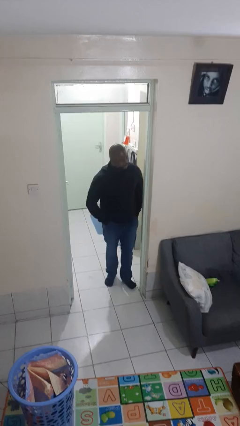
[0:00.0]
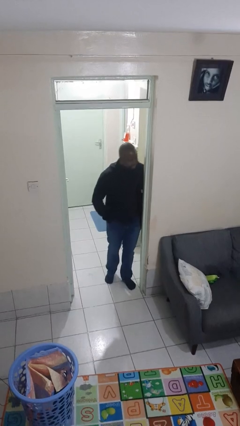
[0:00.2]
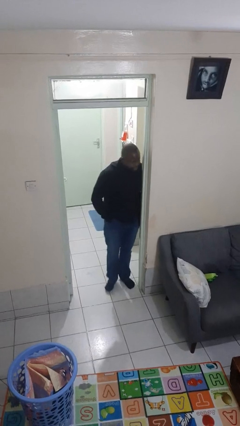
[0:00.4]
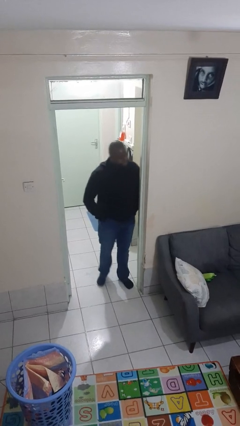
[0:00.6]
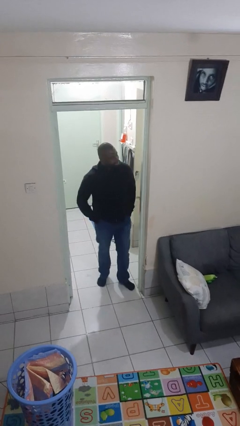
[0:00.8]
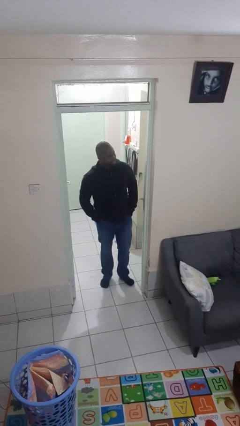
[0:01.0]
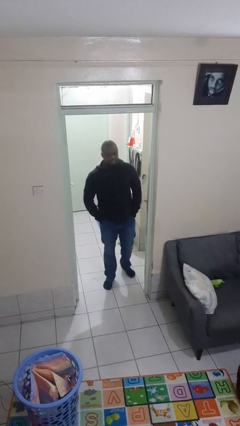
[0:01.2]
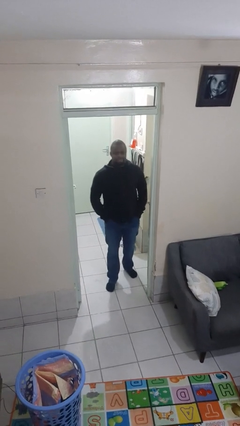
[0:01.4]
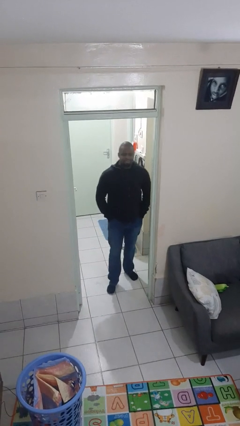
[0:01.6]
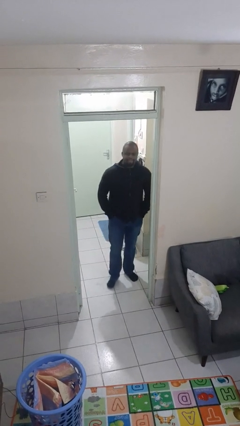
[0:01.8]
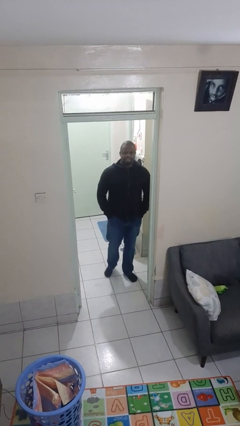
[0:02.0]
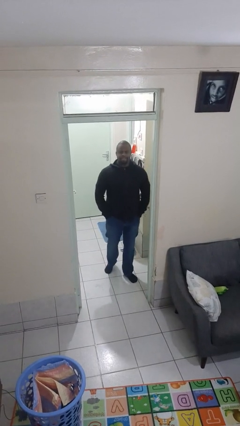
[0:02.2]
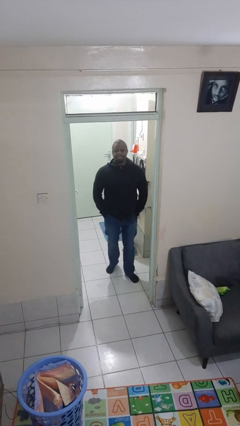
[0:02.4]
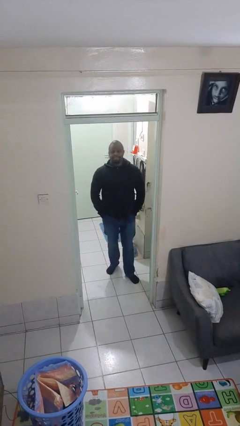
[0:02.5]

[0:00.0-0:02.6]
person bumps into wall

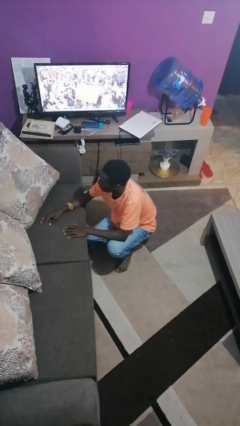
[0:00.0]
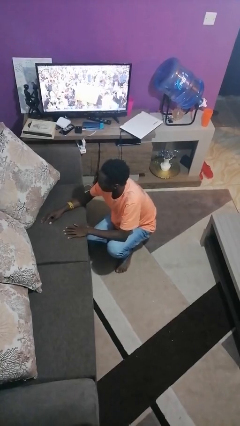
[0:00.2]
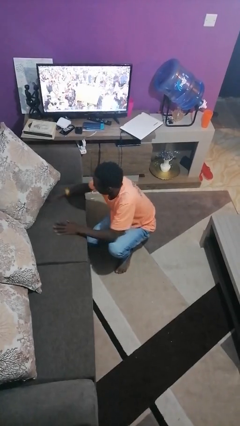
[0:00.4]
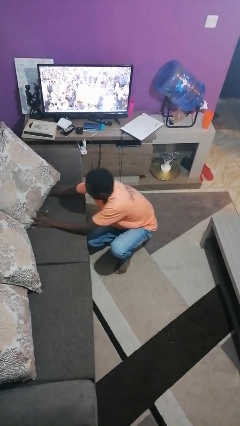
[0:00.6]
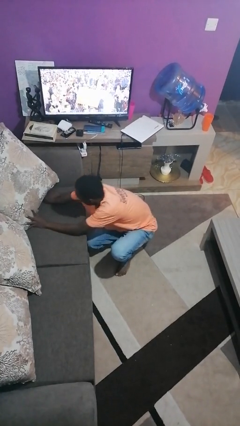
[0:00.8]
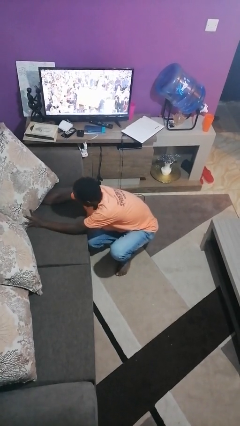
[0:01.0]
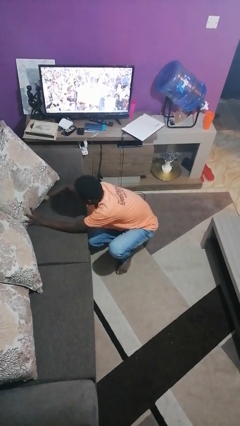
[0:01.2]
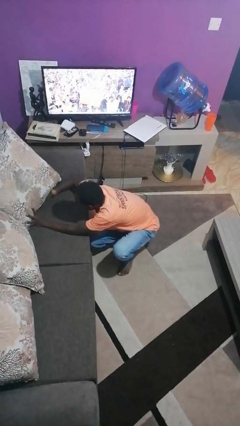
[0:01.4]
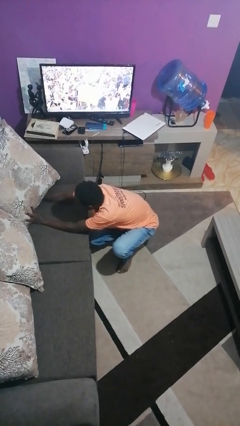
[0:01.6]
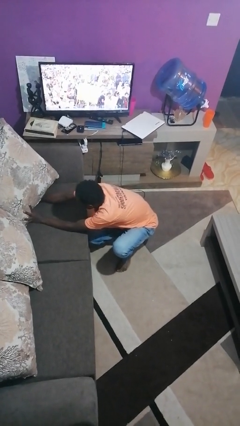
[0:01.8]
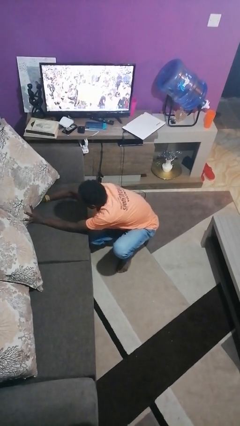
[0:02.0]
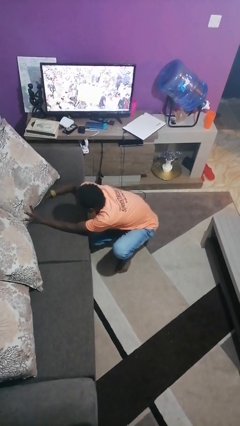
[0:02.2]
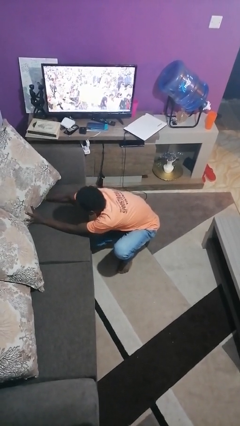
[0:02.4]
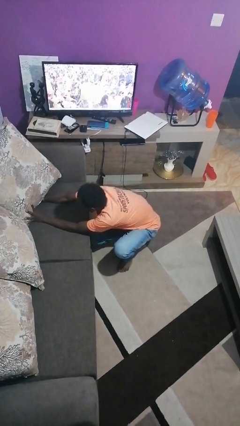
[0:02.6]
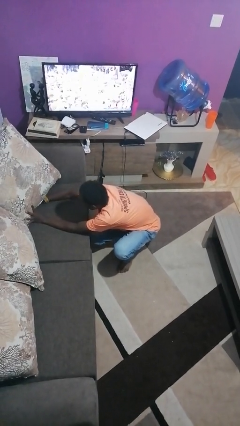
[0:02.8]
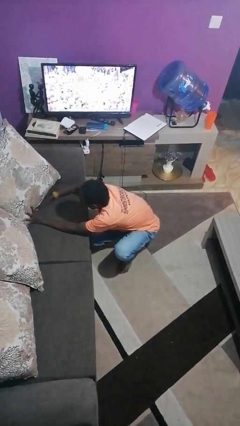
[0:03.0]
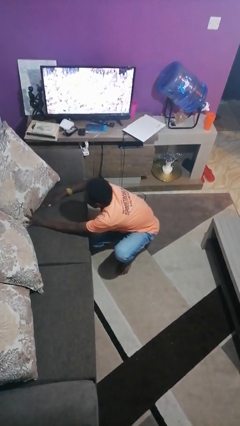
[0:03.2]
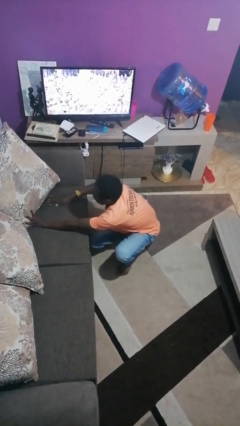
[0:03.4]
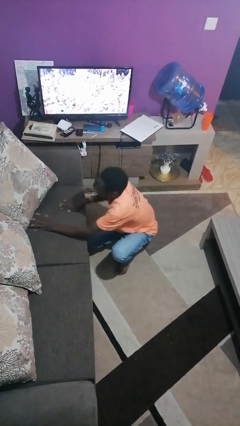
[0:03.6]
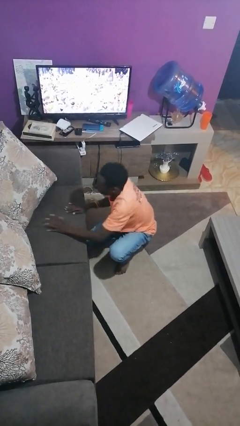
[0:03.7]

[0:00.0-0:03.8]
person searches in couch

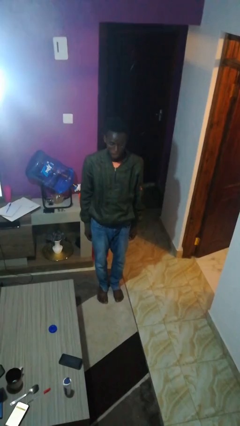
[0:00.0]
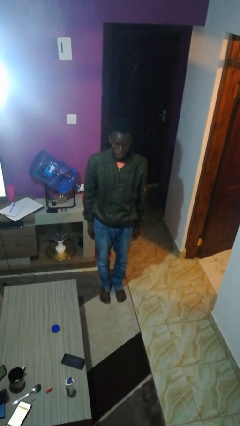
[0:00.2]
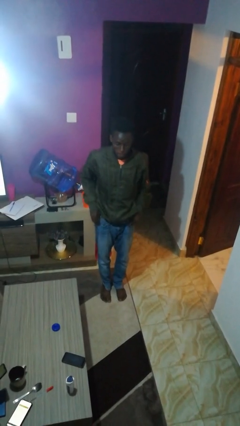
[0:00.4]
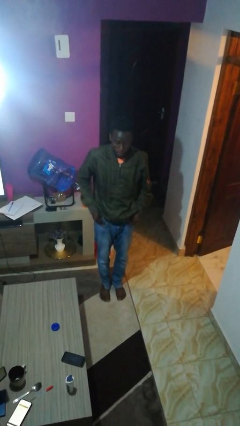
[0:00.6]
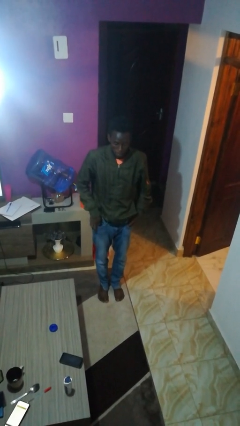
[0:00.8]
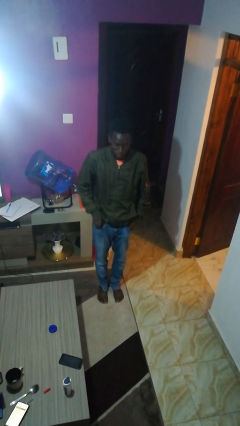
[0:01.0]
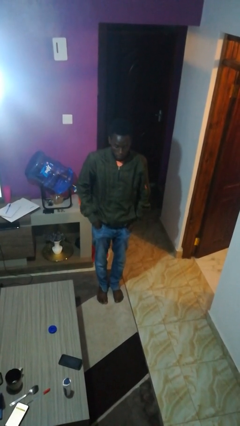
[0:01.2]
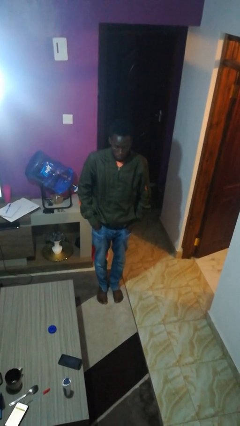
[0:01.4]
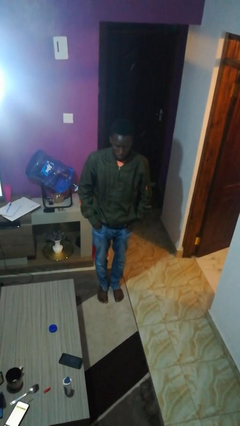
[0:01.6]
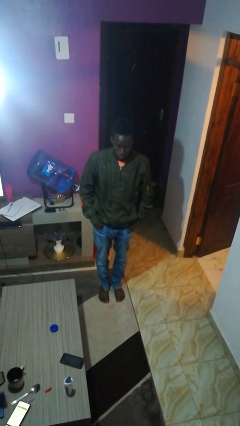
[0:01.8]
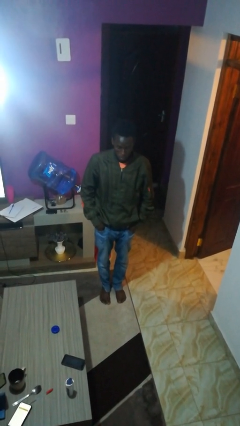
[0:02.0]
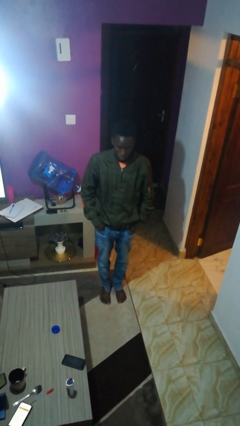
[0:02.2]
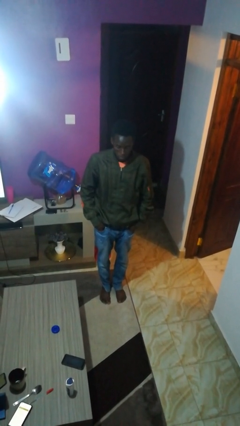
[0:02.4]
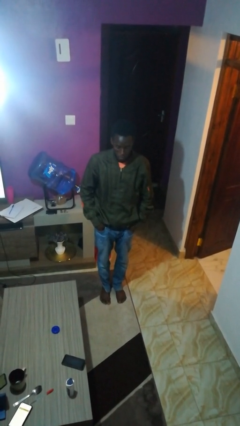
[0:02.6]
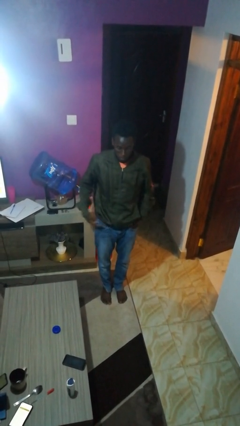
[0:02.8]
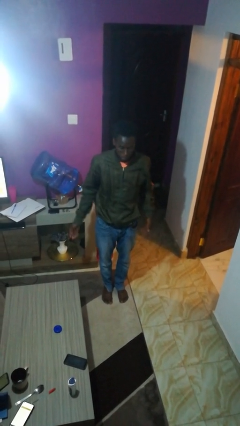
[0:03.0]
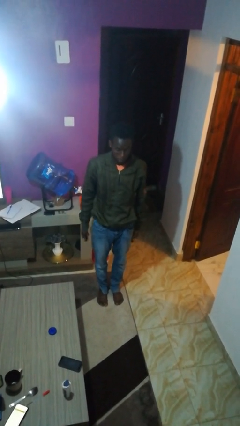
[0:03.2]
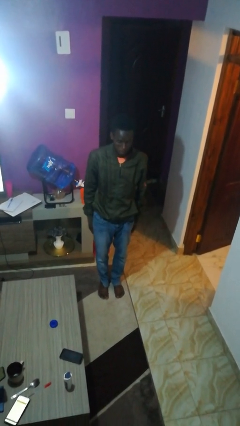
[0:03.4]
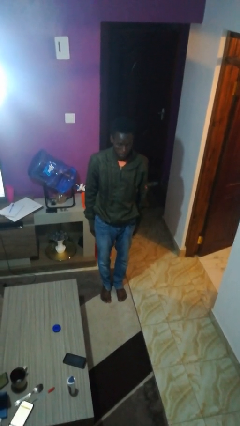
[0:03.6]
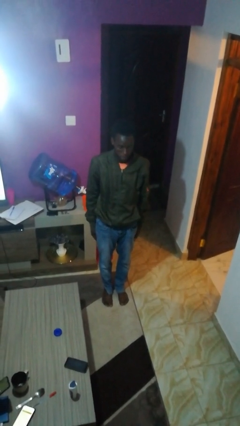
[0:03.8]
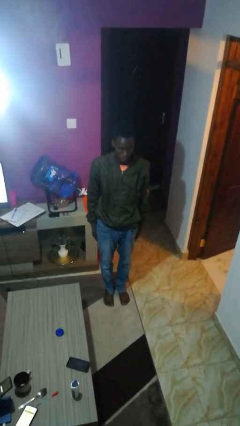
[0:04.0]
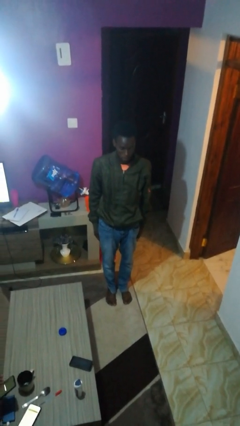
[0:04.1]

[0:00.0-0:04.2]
person puts hands in back pockets

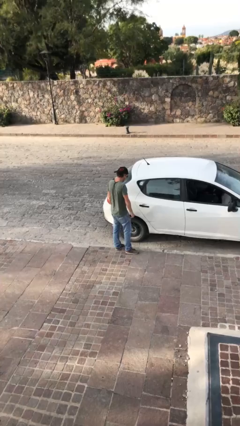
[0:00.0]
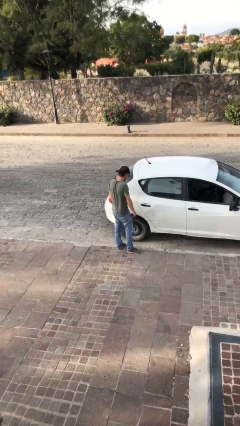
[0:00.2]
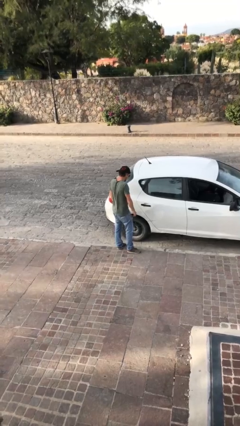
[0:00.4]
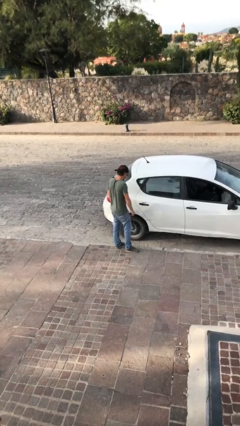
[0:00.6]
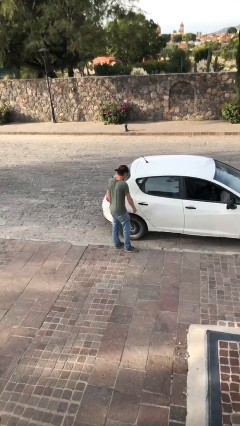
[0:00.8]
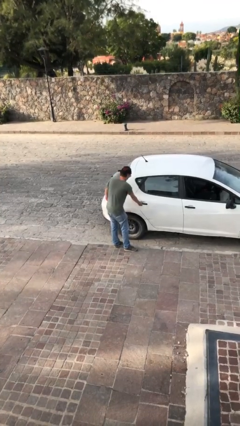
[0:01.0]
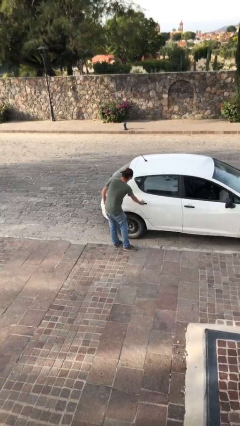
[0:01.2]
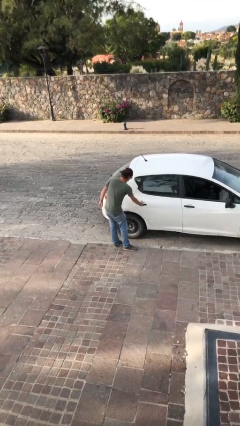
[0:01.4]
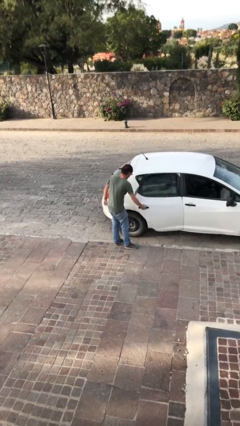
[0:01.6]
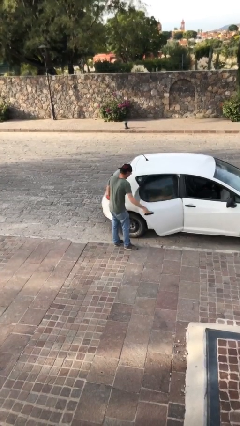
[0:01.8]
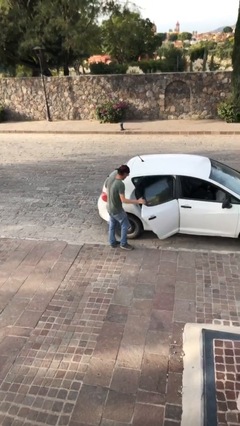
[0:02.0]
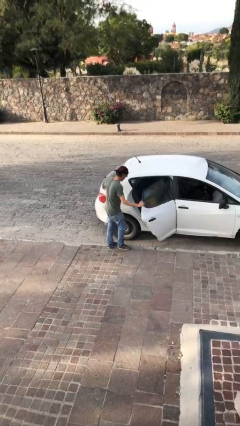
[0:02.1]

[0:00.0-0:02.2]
person opens car door

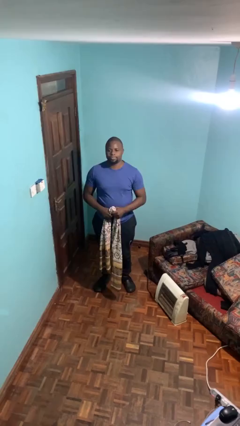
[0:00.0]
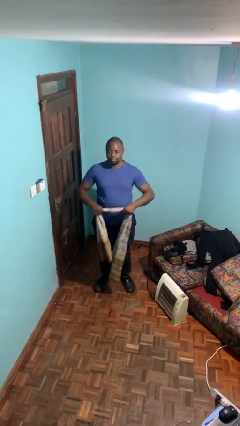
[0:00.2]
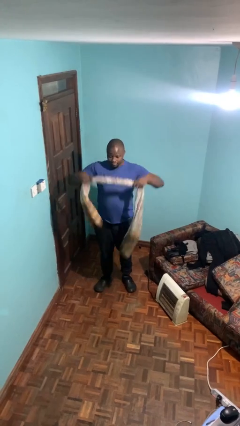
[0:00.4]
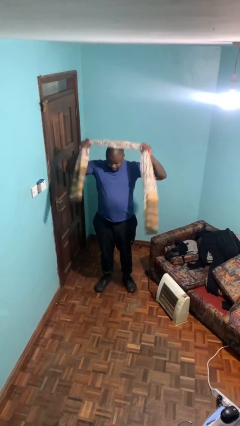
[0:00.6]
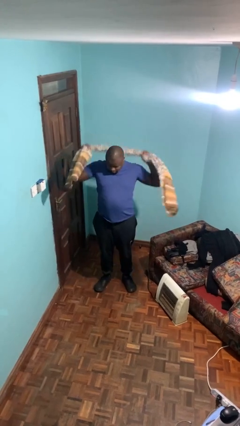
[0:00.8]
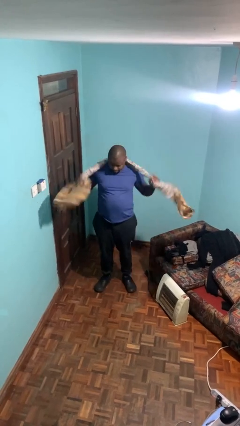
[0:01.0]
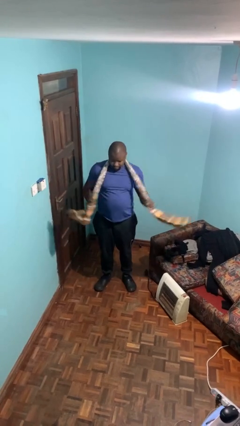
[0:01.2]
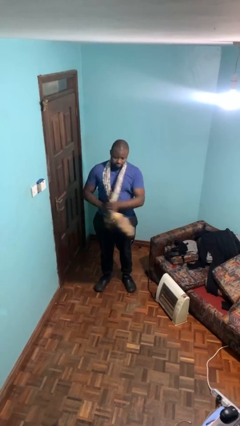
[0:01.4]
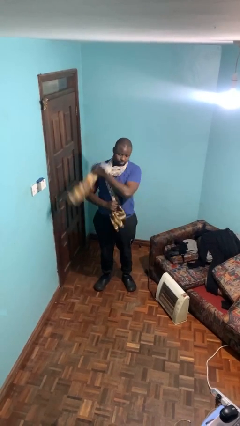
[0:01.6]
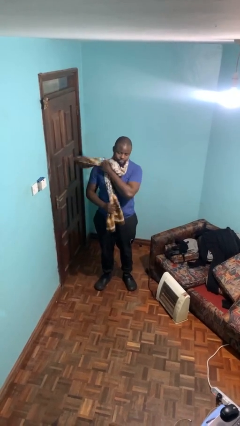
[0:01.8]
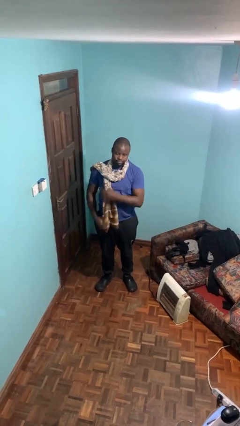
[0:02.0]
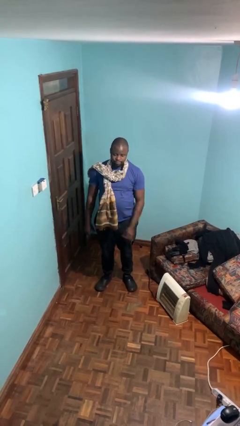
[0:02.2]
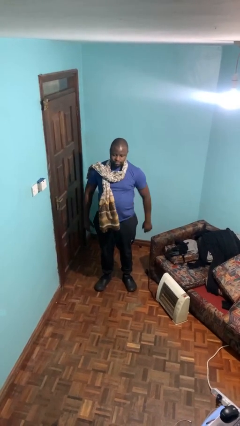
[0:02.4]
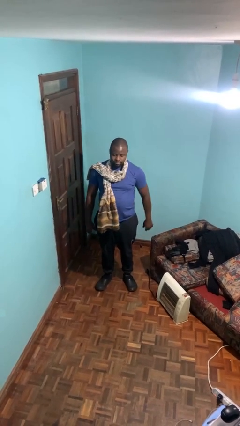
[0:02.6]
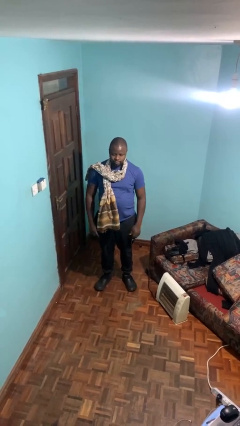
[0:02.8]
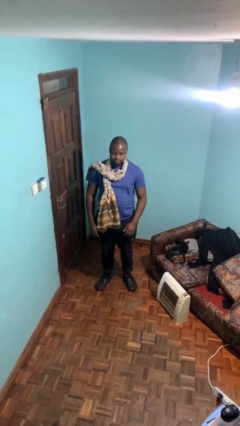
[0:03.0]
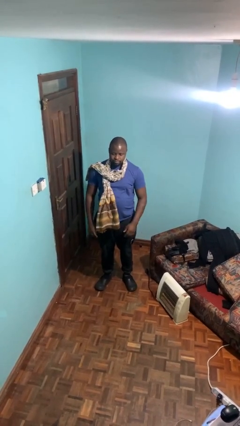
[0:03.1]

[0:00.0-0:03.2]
person puts on scarf

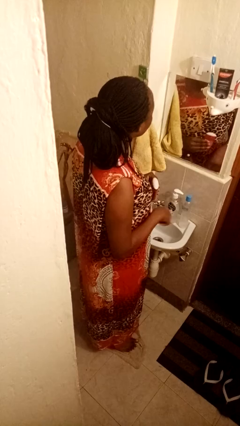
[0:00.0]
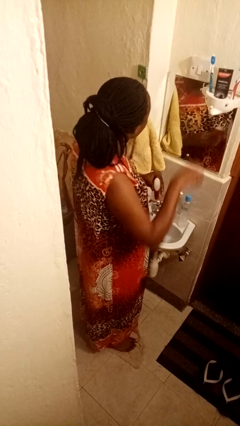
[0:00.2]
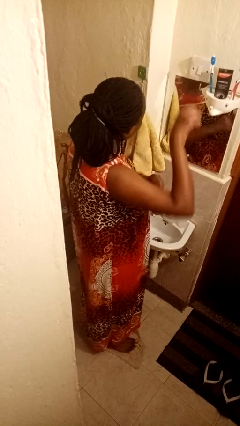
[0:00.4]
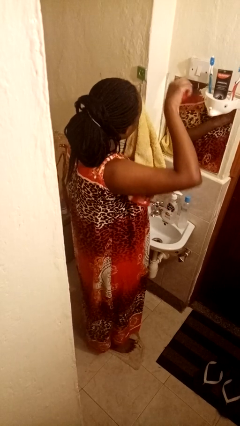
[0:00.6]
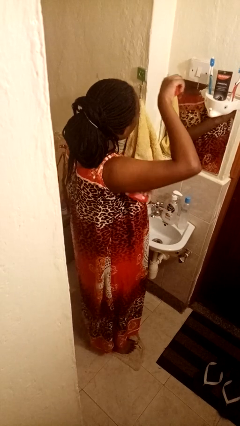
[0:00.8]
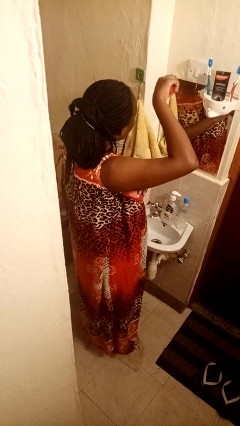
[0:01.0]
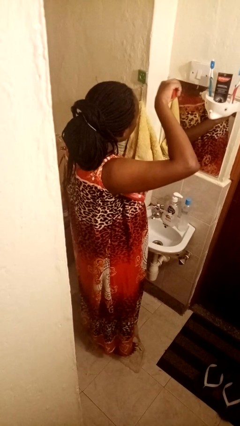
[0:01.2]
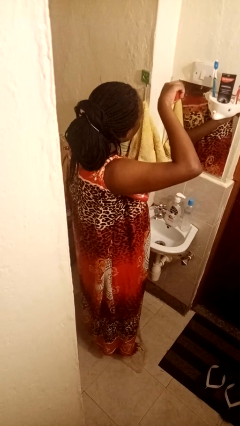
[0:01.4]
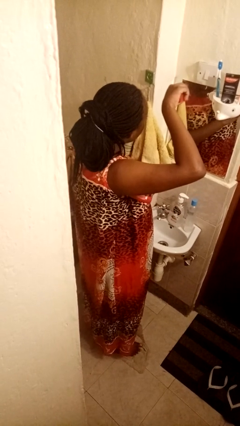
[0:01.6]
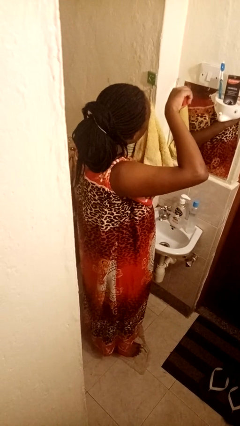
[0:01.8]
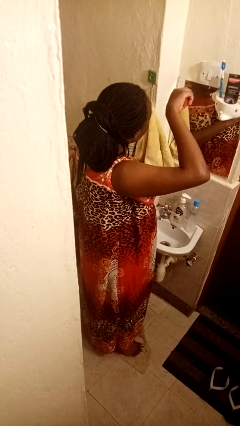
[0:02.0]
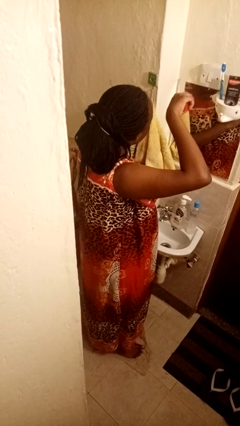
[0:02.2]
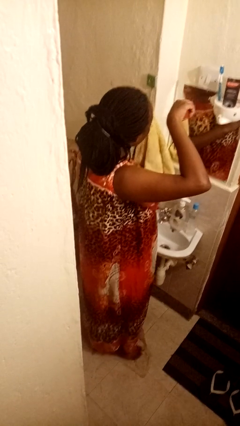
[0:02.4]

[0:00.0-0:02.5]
person applies deodorant
